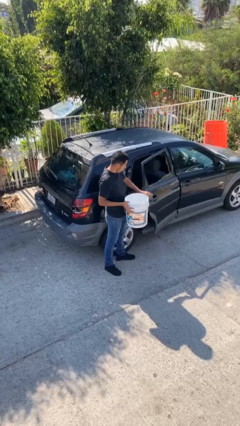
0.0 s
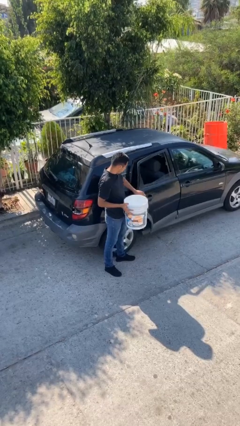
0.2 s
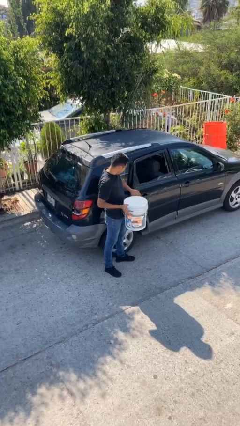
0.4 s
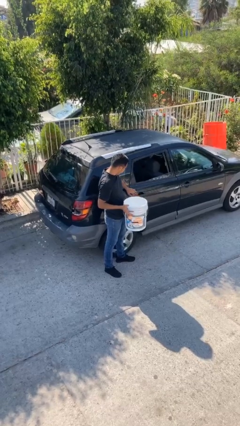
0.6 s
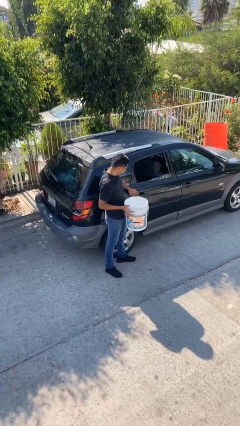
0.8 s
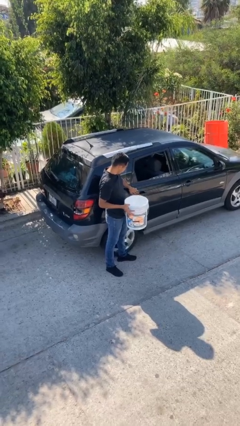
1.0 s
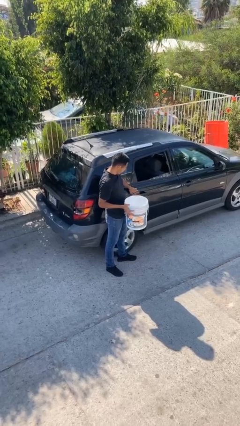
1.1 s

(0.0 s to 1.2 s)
person closes car door

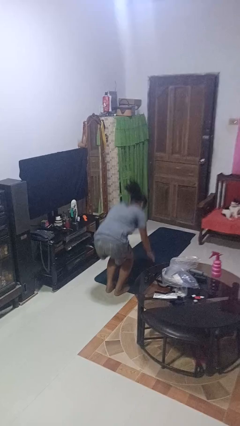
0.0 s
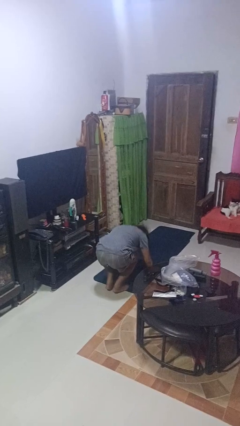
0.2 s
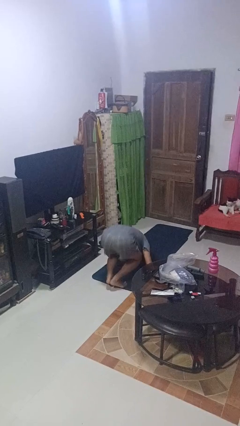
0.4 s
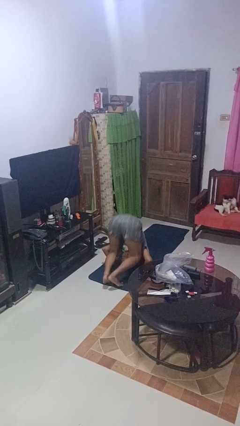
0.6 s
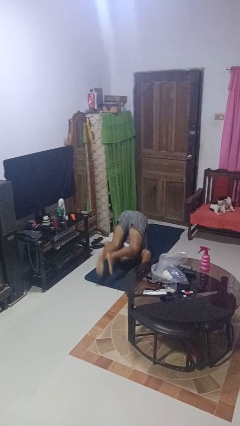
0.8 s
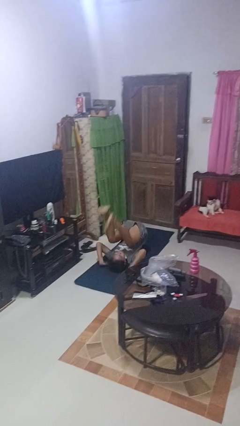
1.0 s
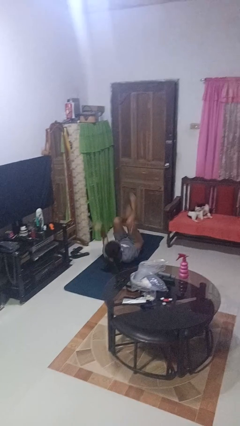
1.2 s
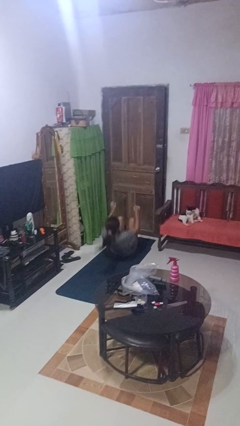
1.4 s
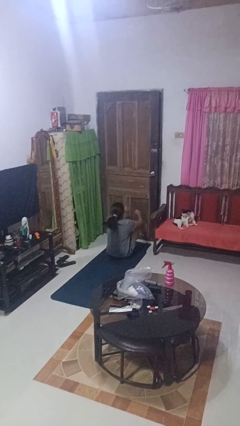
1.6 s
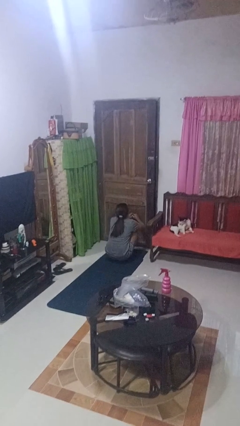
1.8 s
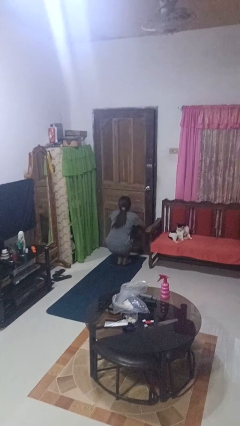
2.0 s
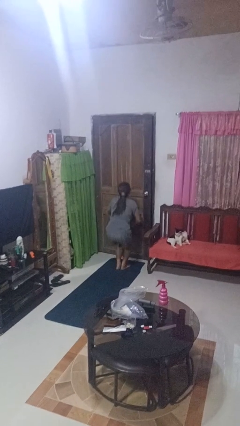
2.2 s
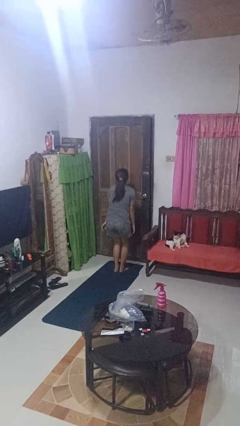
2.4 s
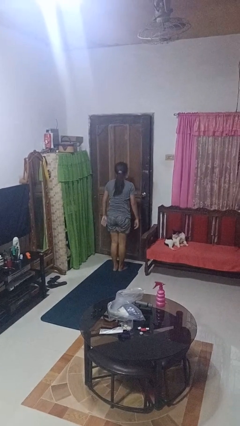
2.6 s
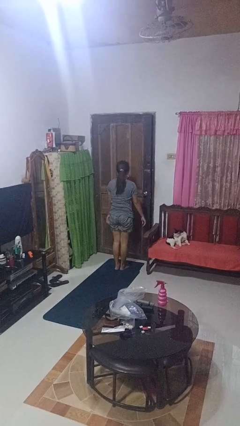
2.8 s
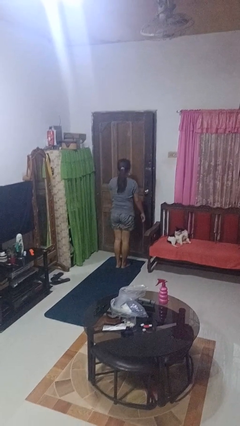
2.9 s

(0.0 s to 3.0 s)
person somersaults

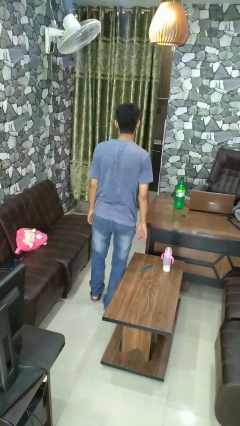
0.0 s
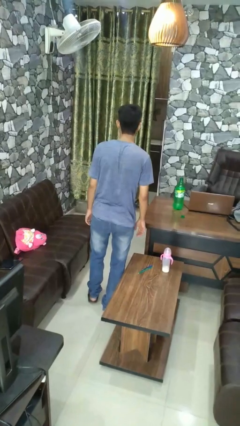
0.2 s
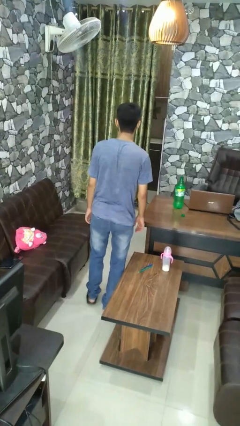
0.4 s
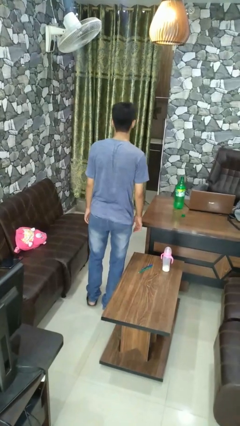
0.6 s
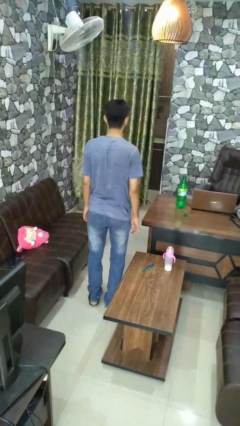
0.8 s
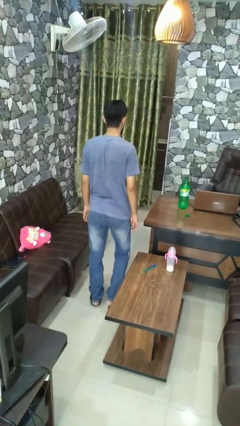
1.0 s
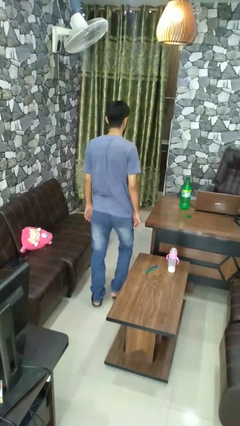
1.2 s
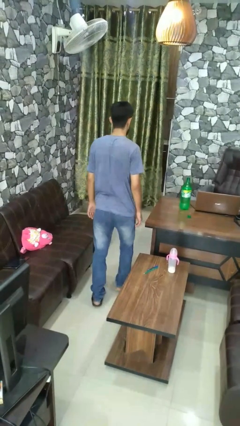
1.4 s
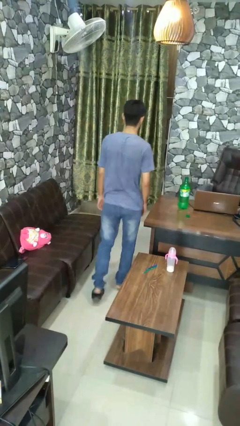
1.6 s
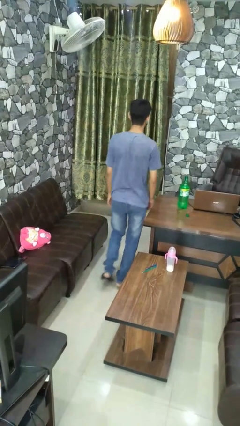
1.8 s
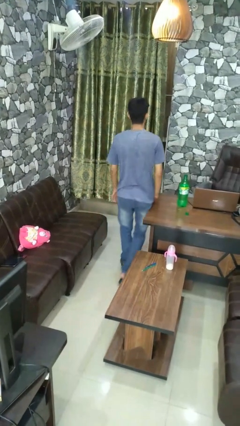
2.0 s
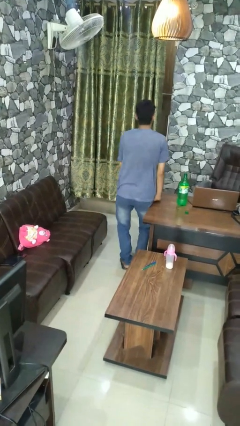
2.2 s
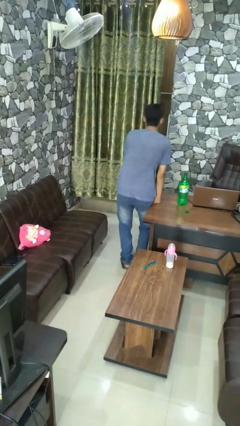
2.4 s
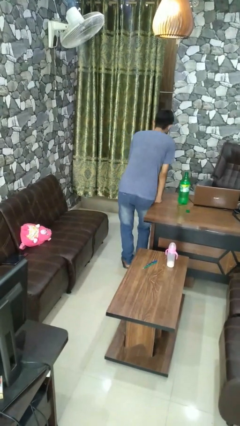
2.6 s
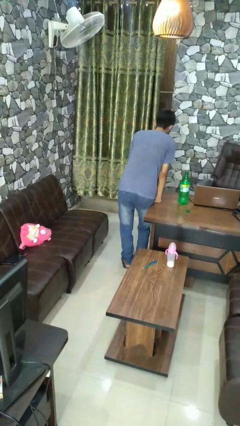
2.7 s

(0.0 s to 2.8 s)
person bumps into table

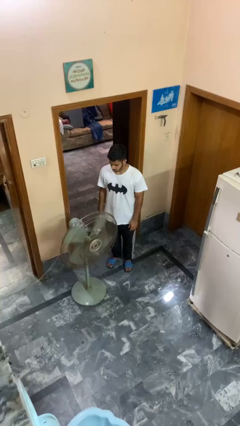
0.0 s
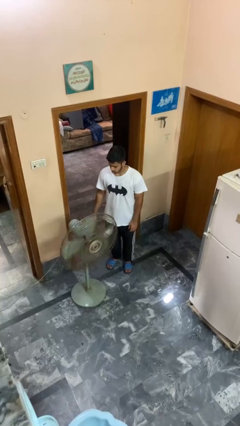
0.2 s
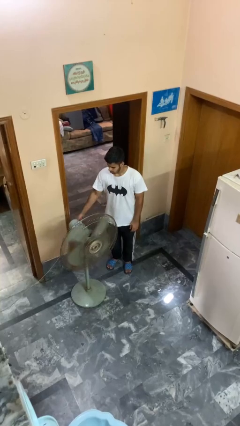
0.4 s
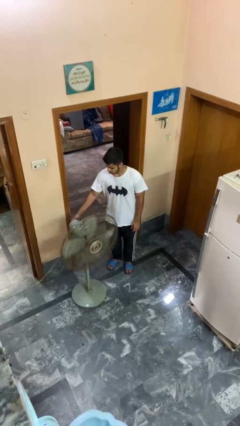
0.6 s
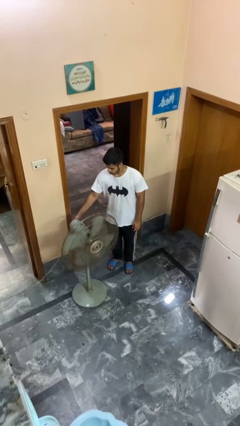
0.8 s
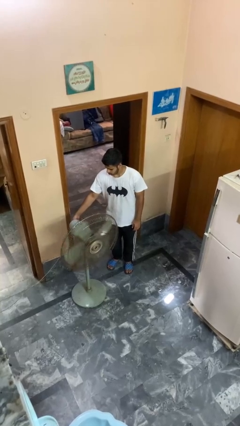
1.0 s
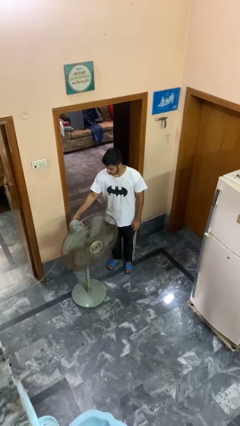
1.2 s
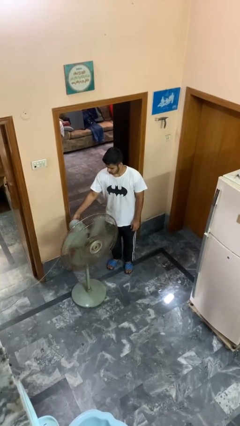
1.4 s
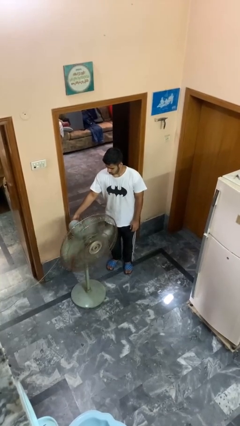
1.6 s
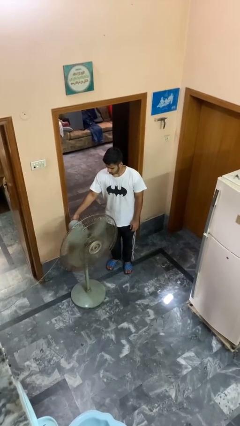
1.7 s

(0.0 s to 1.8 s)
person turns on fan

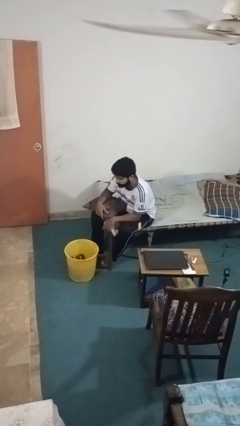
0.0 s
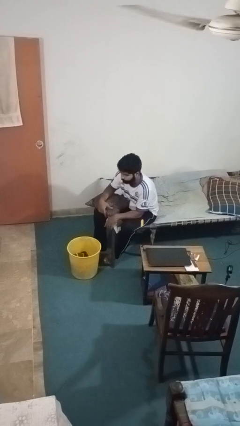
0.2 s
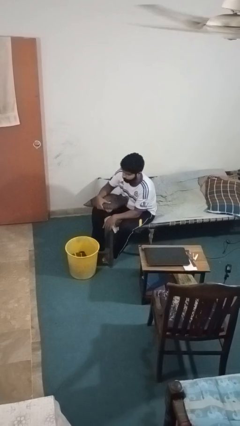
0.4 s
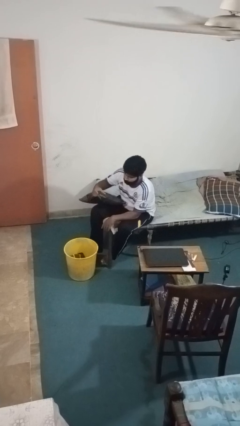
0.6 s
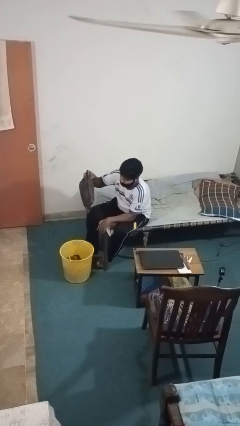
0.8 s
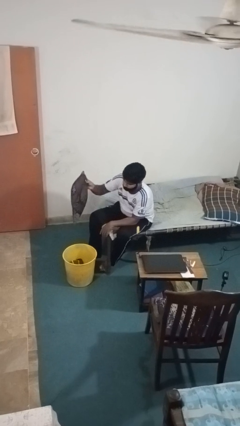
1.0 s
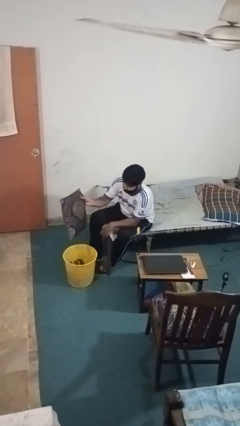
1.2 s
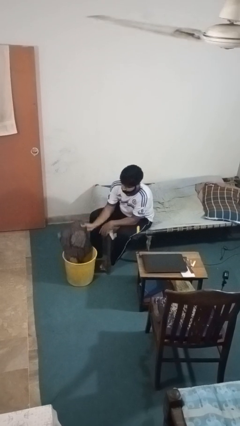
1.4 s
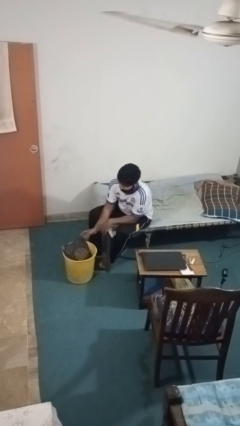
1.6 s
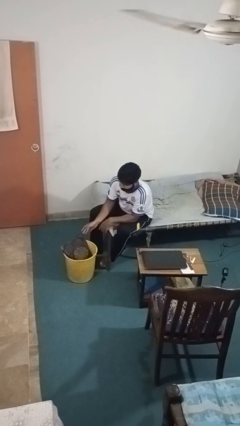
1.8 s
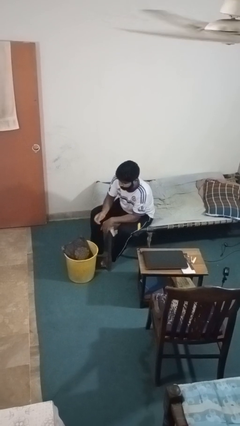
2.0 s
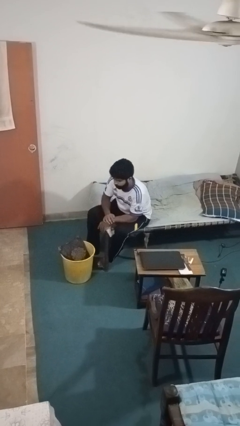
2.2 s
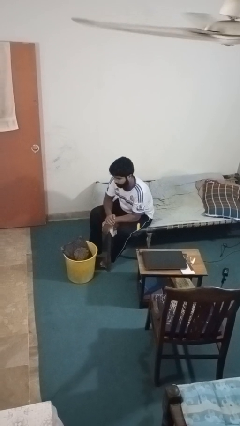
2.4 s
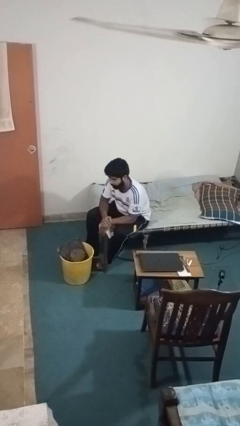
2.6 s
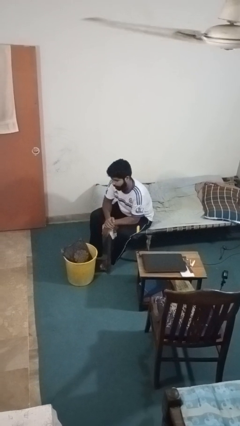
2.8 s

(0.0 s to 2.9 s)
person puts object into basket

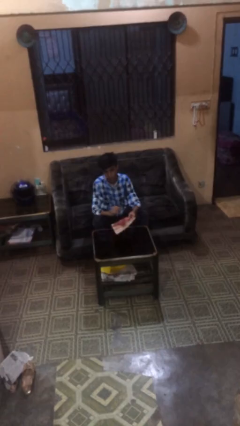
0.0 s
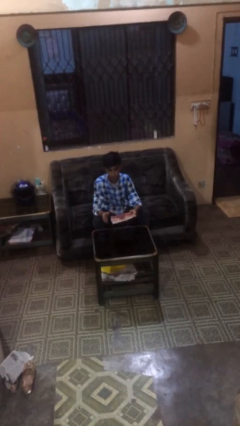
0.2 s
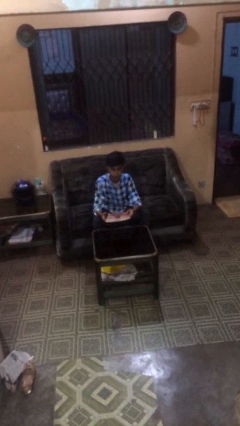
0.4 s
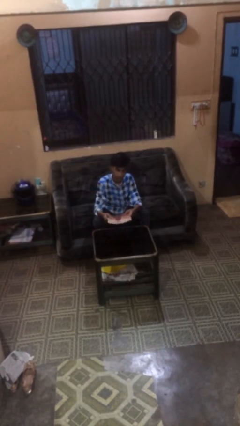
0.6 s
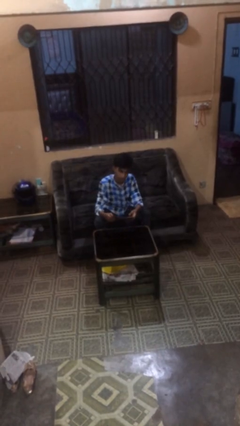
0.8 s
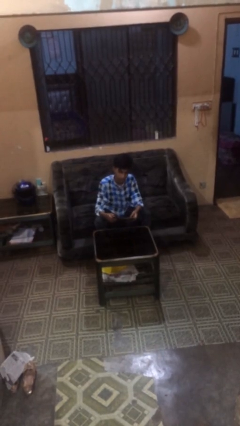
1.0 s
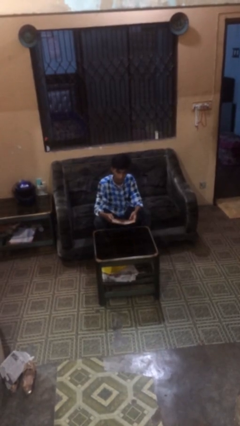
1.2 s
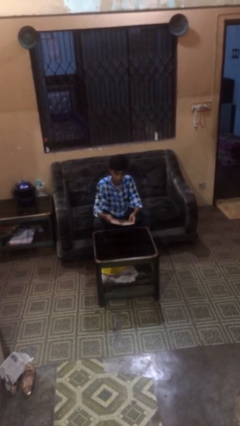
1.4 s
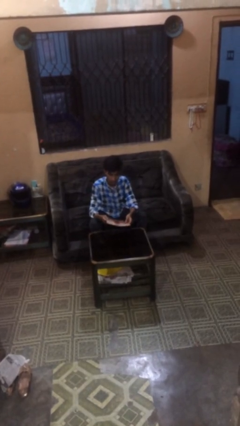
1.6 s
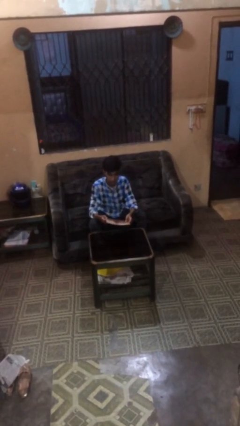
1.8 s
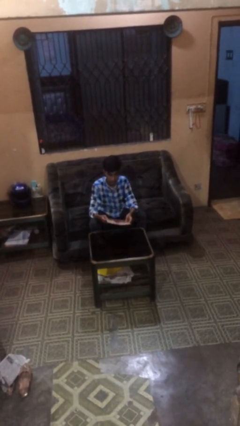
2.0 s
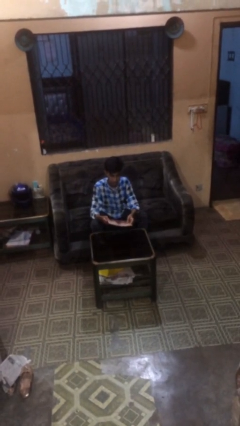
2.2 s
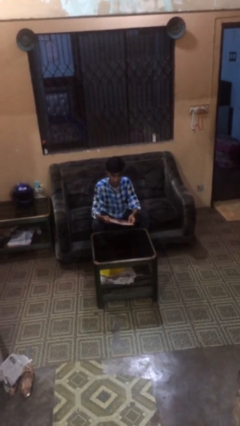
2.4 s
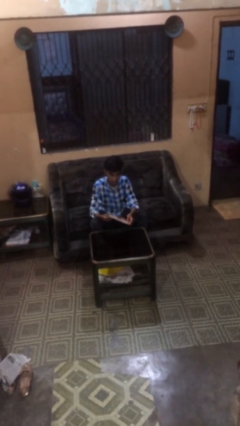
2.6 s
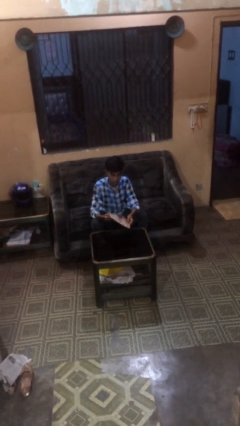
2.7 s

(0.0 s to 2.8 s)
person picks up object from table

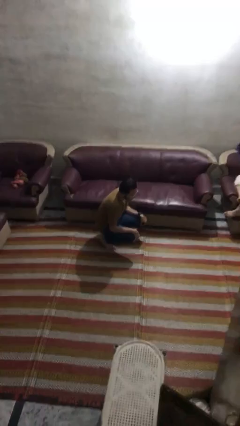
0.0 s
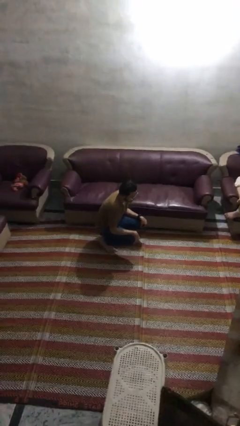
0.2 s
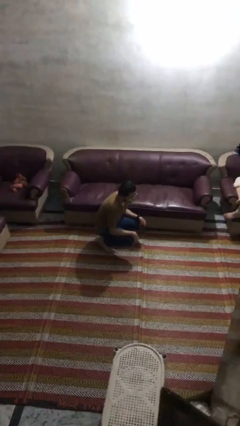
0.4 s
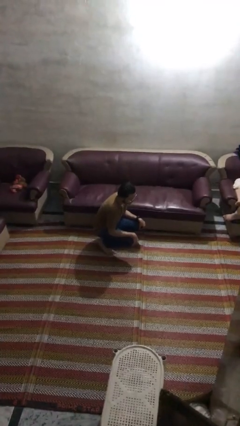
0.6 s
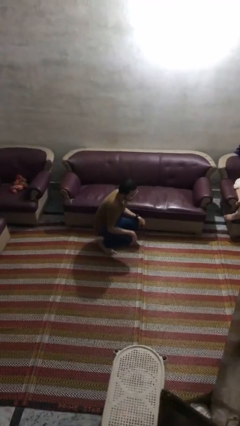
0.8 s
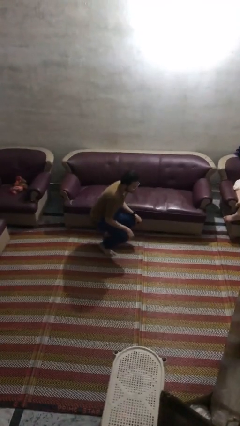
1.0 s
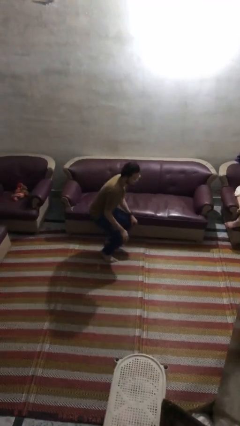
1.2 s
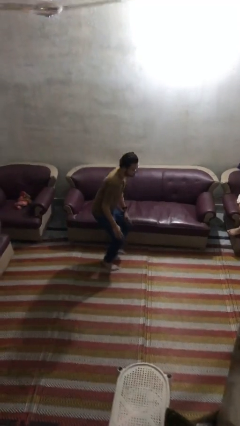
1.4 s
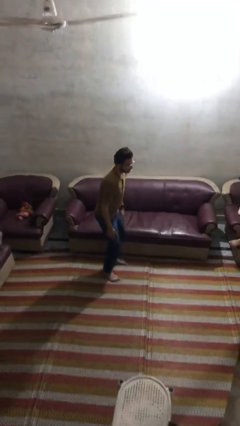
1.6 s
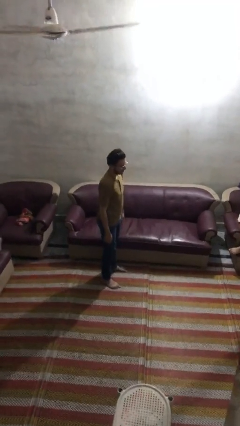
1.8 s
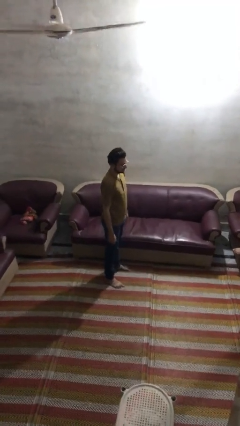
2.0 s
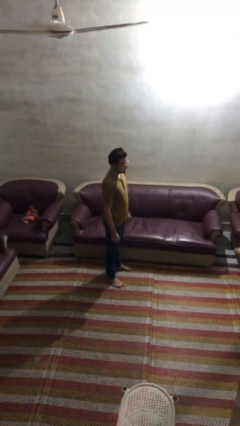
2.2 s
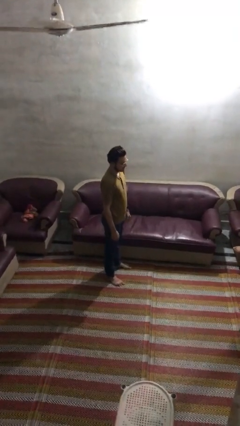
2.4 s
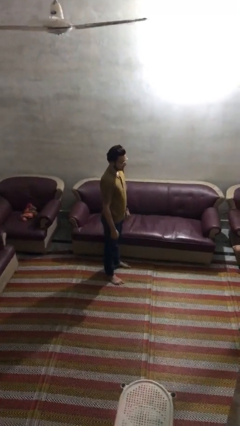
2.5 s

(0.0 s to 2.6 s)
person stands up
